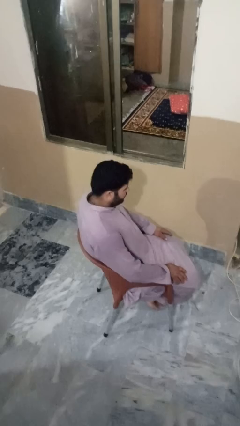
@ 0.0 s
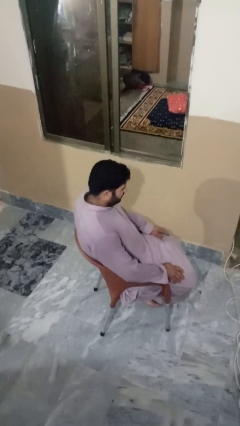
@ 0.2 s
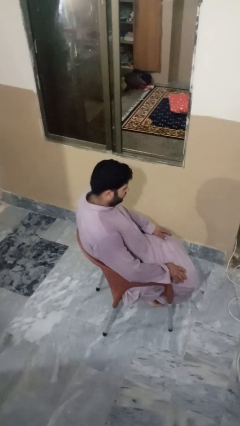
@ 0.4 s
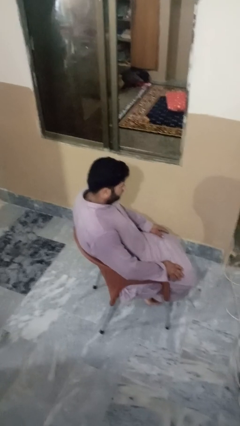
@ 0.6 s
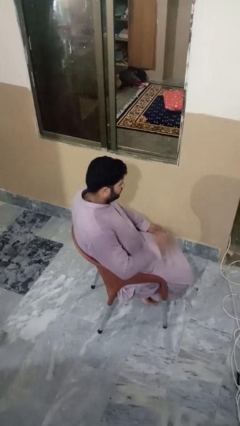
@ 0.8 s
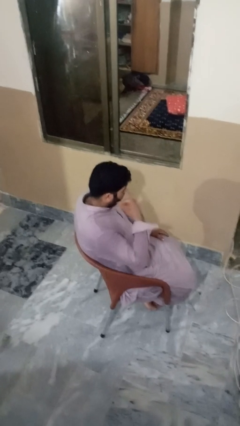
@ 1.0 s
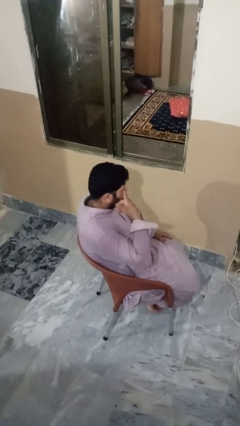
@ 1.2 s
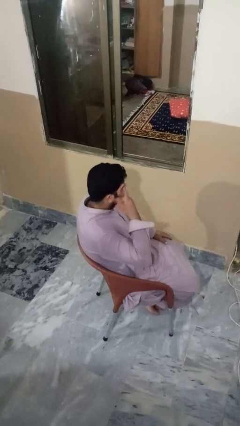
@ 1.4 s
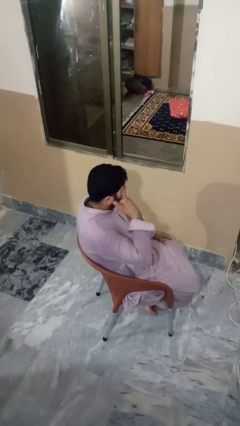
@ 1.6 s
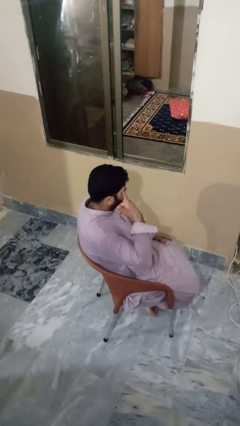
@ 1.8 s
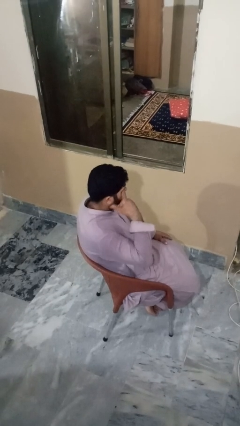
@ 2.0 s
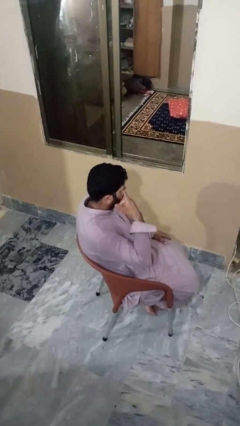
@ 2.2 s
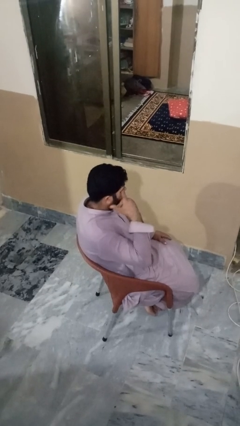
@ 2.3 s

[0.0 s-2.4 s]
person rubs eyes

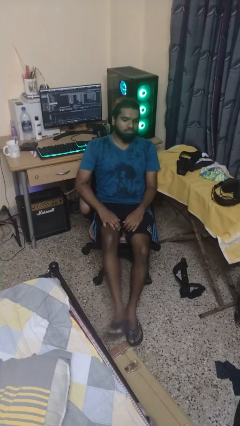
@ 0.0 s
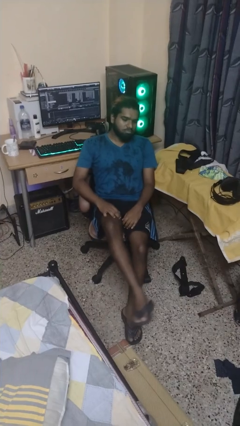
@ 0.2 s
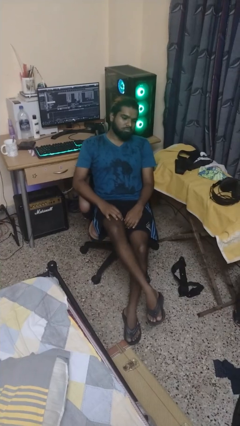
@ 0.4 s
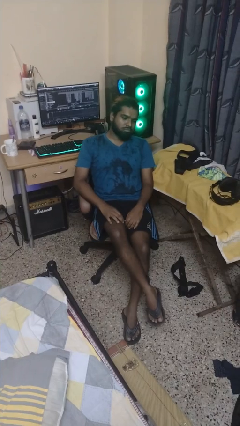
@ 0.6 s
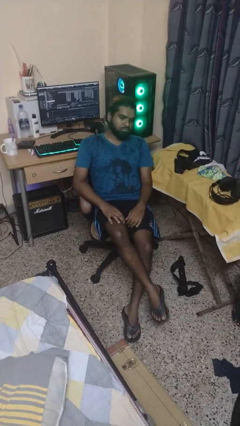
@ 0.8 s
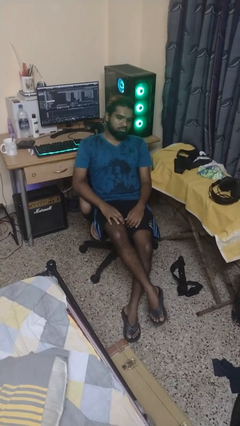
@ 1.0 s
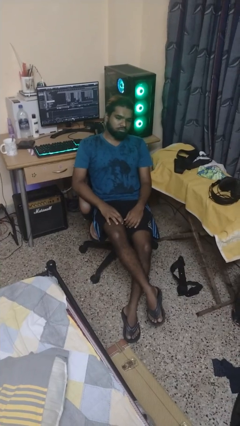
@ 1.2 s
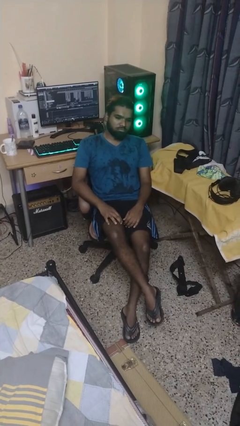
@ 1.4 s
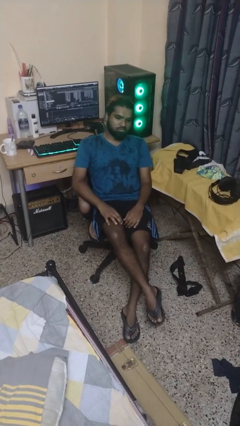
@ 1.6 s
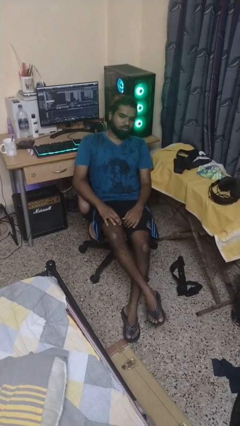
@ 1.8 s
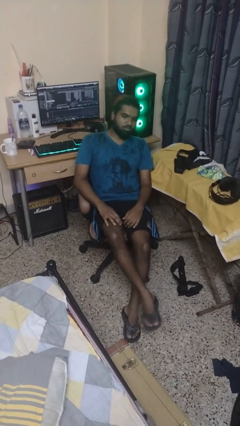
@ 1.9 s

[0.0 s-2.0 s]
person crosses legs

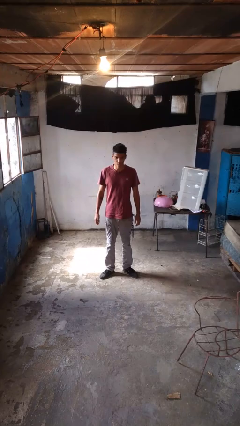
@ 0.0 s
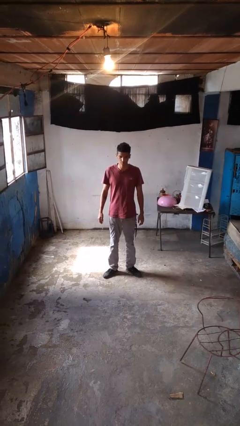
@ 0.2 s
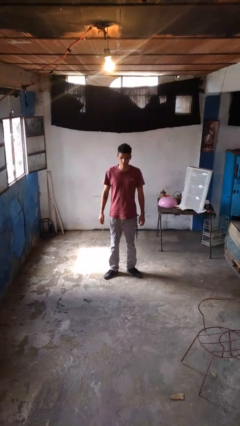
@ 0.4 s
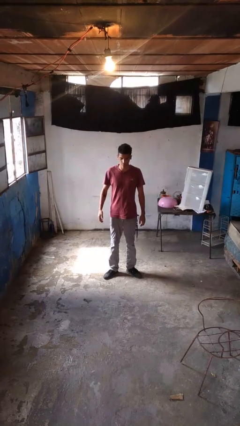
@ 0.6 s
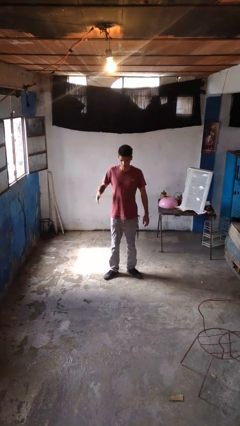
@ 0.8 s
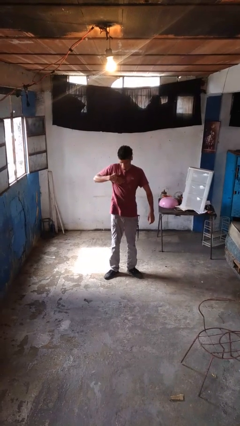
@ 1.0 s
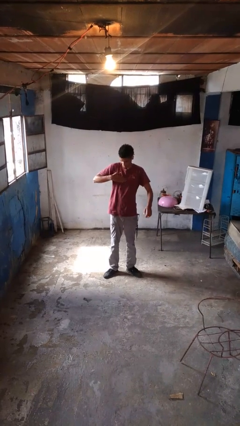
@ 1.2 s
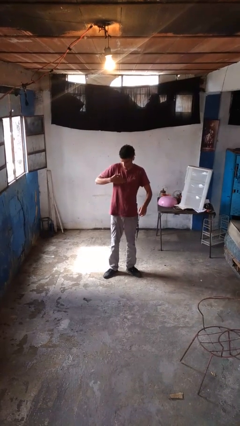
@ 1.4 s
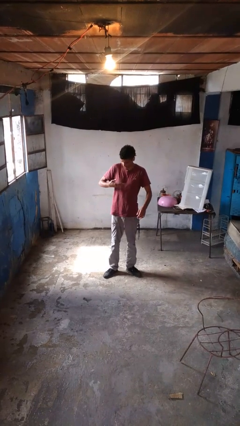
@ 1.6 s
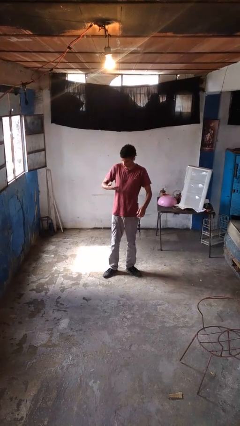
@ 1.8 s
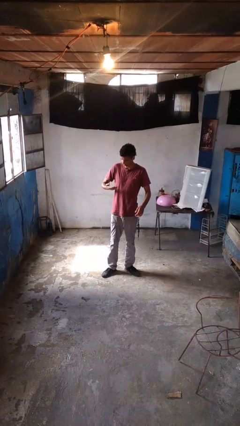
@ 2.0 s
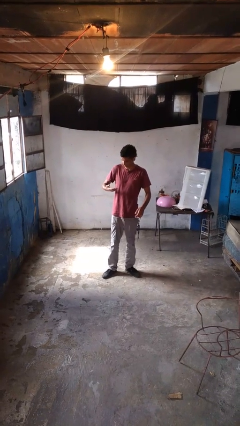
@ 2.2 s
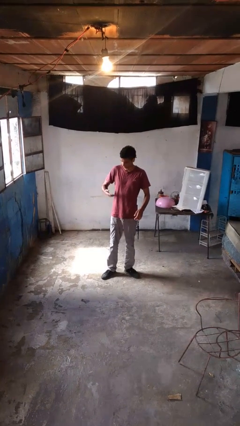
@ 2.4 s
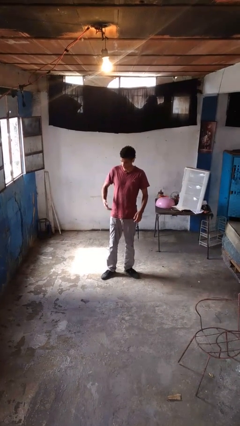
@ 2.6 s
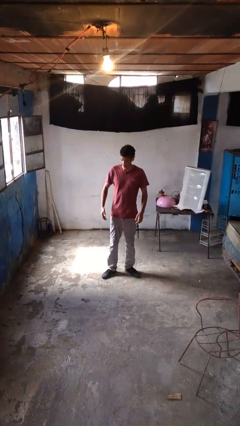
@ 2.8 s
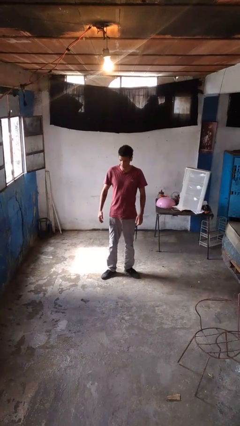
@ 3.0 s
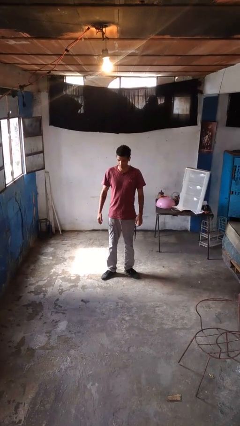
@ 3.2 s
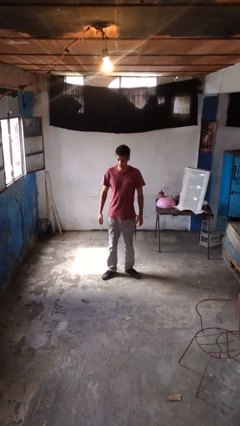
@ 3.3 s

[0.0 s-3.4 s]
person swats bug

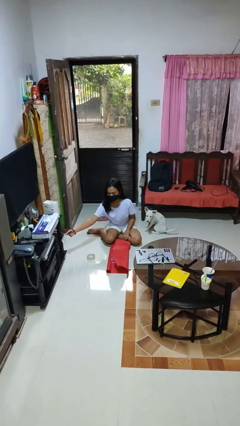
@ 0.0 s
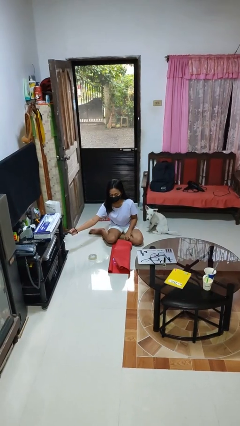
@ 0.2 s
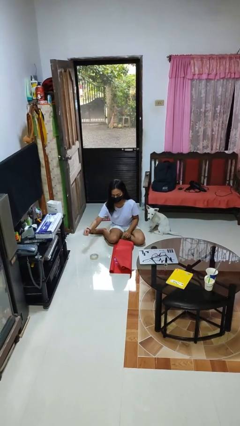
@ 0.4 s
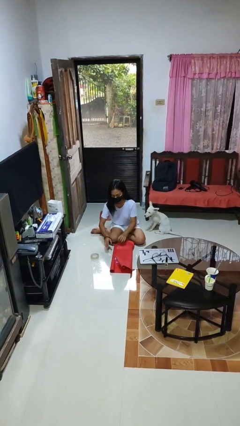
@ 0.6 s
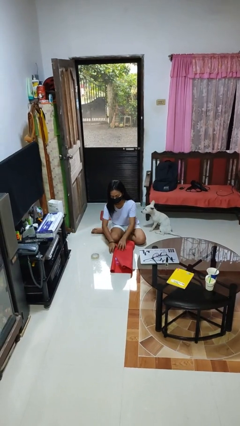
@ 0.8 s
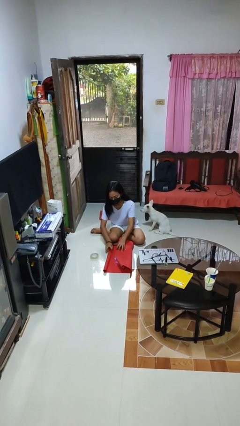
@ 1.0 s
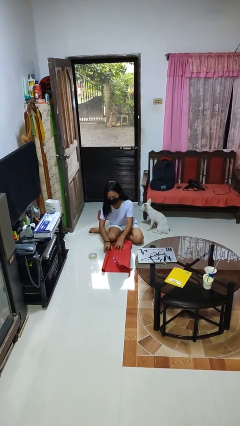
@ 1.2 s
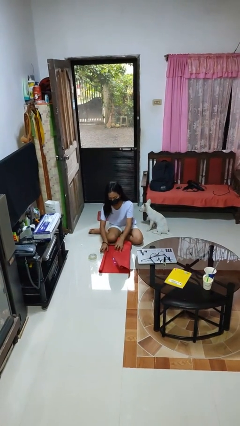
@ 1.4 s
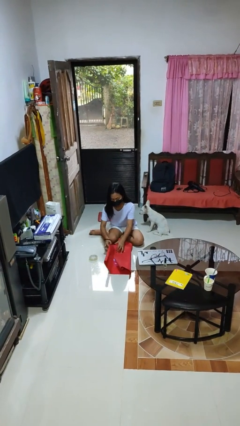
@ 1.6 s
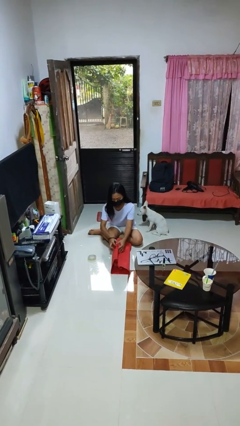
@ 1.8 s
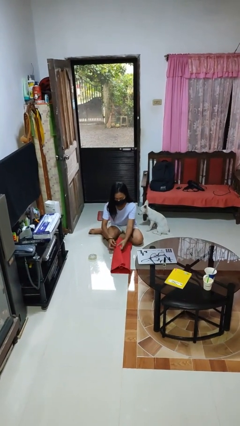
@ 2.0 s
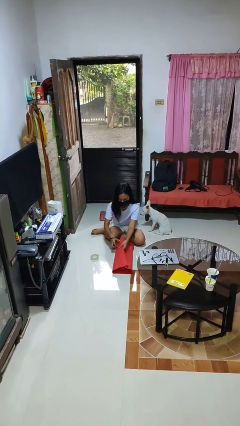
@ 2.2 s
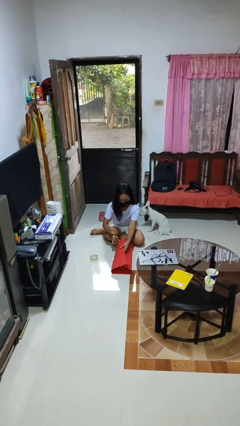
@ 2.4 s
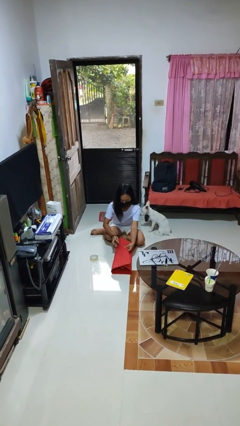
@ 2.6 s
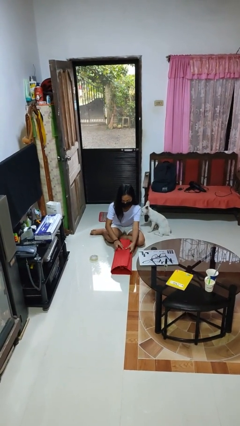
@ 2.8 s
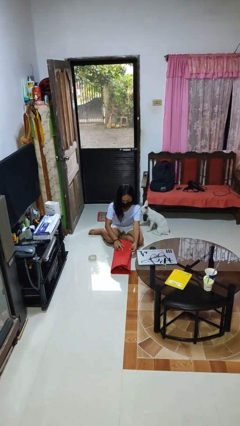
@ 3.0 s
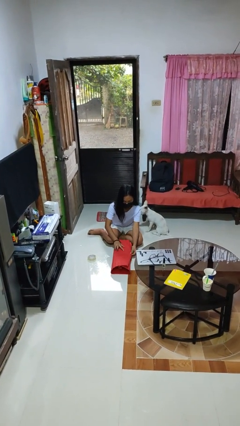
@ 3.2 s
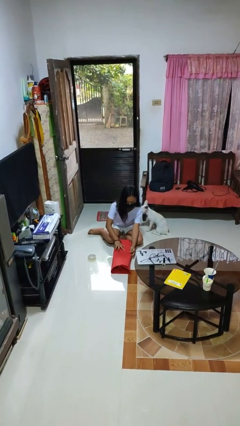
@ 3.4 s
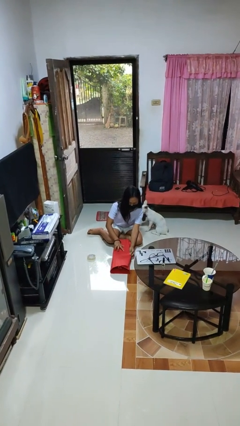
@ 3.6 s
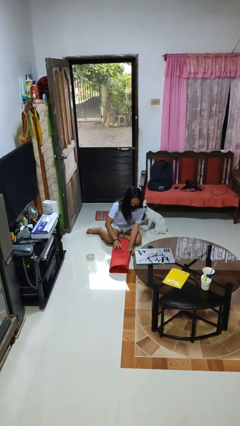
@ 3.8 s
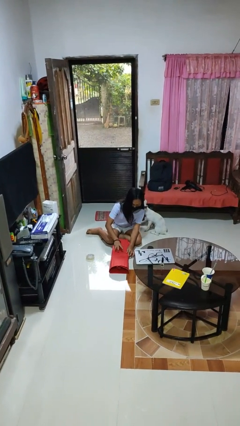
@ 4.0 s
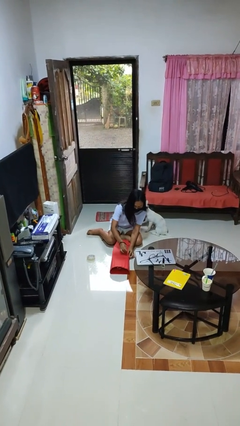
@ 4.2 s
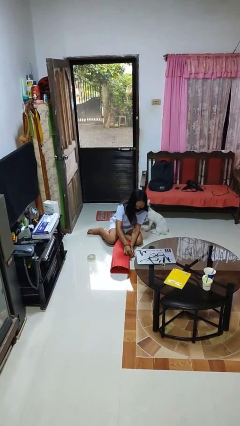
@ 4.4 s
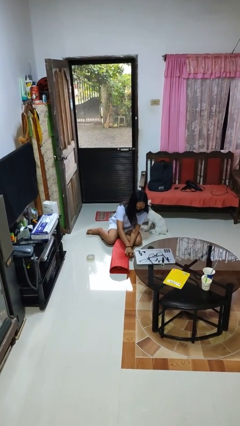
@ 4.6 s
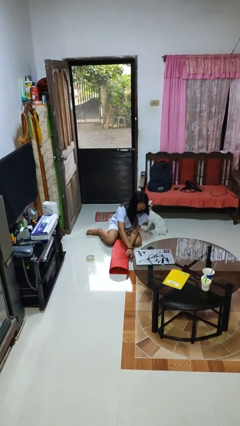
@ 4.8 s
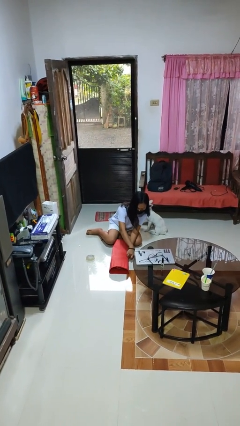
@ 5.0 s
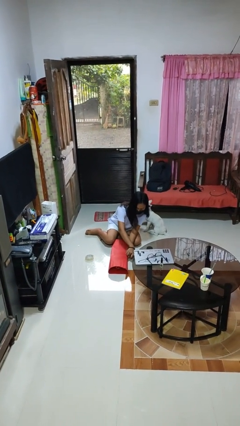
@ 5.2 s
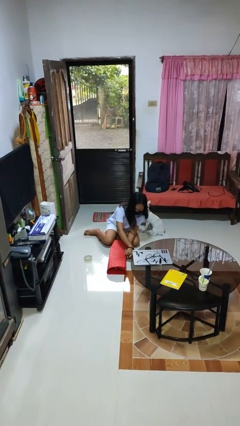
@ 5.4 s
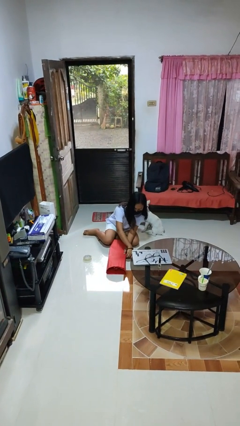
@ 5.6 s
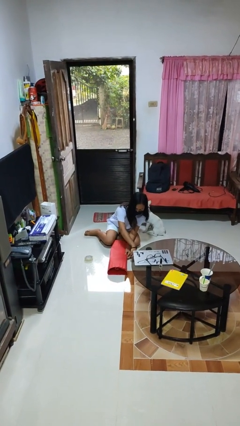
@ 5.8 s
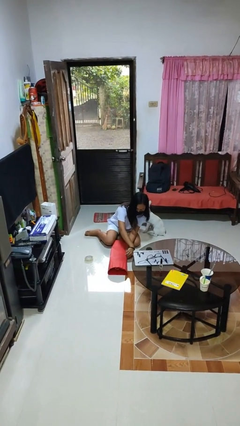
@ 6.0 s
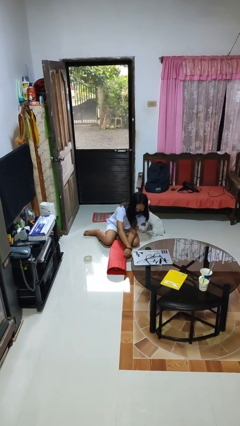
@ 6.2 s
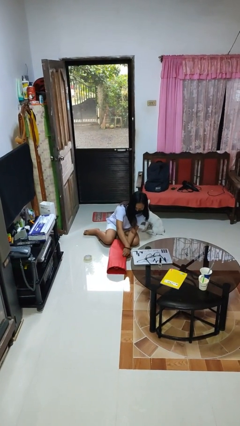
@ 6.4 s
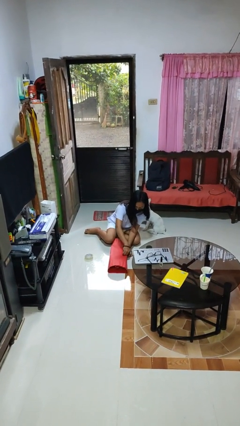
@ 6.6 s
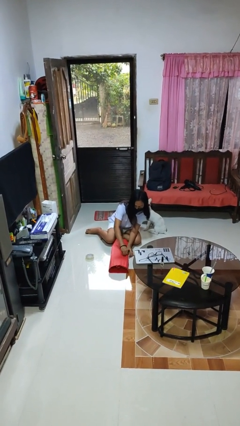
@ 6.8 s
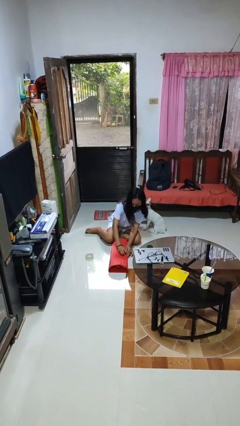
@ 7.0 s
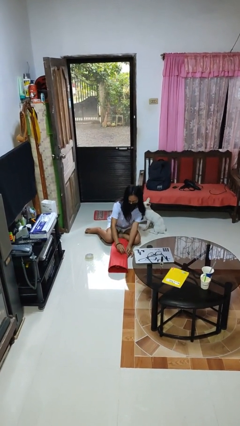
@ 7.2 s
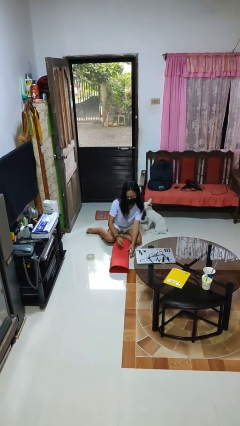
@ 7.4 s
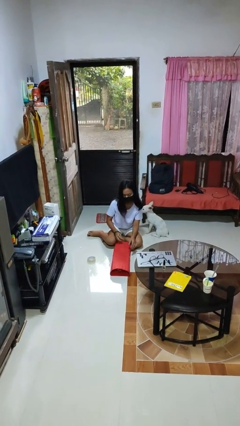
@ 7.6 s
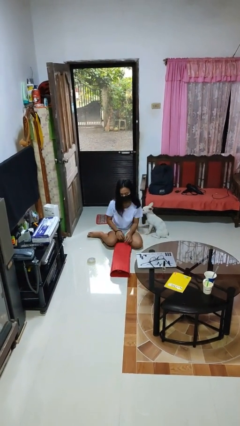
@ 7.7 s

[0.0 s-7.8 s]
person wraps box

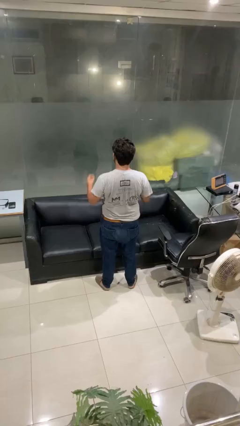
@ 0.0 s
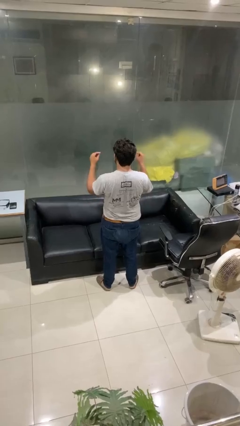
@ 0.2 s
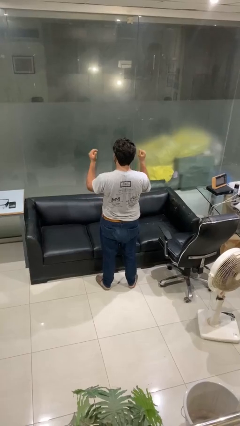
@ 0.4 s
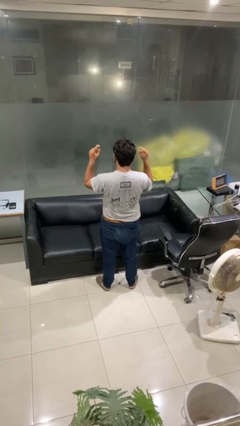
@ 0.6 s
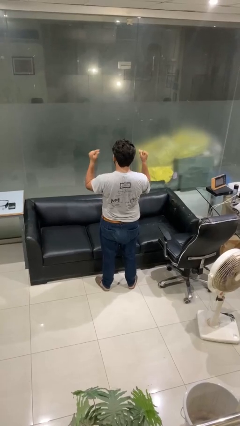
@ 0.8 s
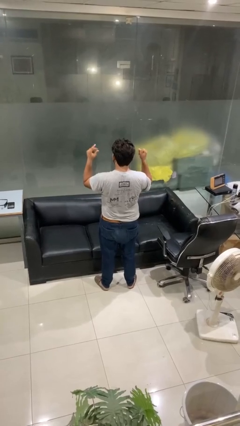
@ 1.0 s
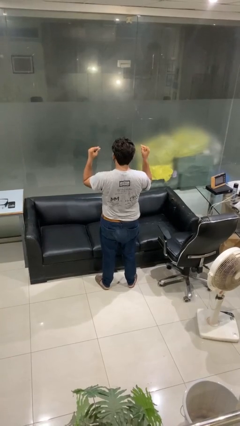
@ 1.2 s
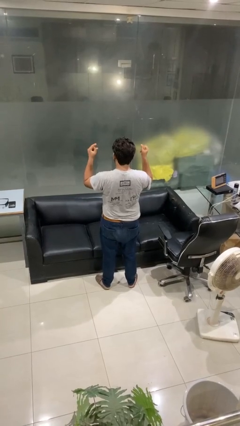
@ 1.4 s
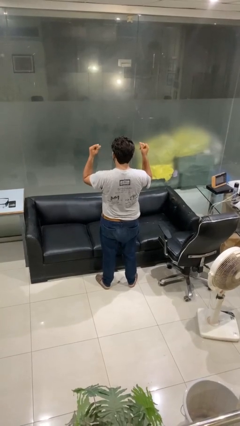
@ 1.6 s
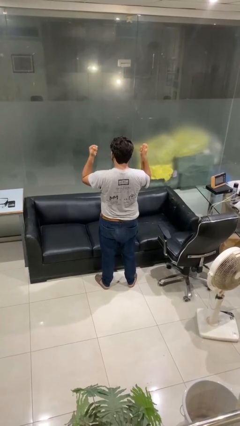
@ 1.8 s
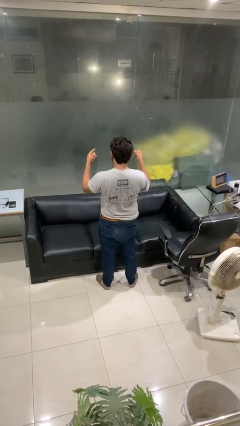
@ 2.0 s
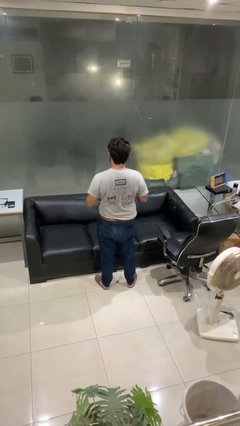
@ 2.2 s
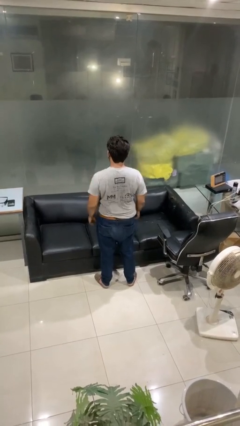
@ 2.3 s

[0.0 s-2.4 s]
person snaps fingers
